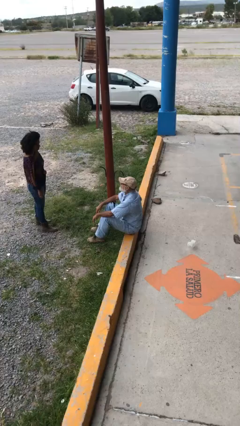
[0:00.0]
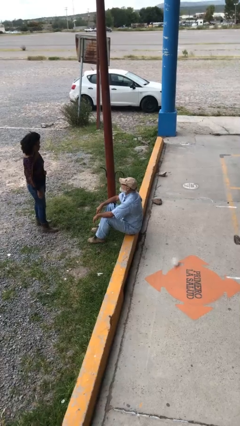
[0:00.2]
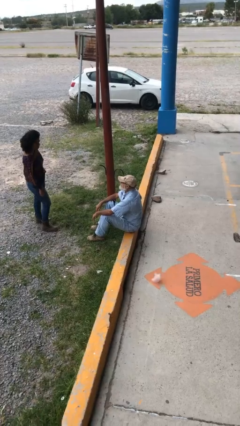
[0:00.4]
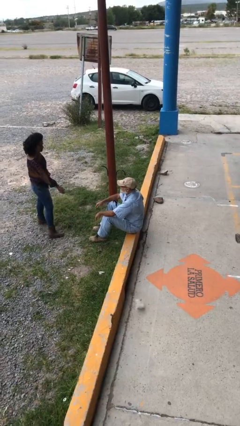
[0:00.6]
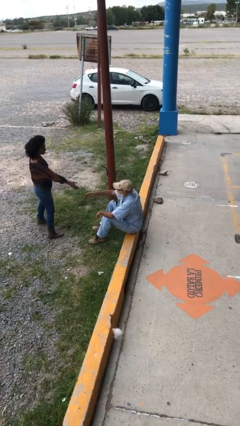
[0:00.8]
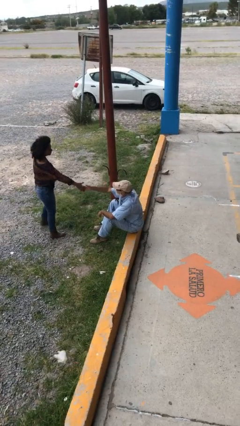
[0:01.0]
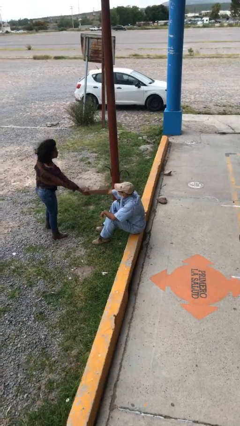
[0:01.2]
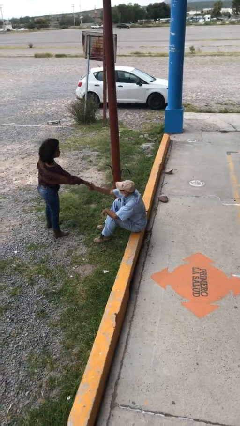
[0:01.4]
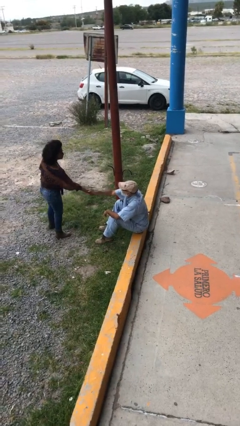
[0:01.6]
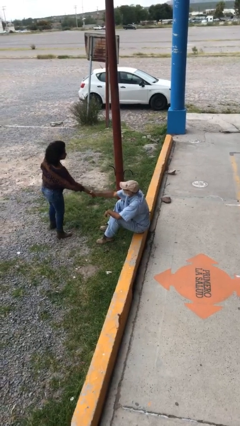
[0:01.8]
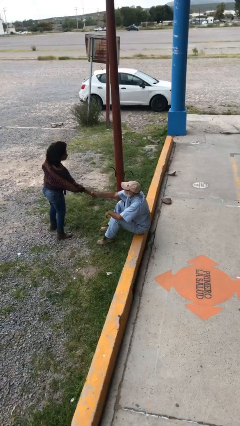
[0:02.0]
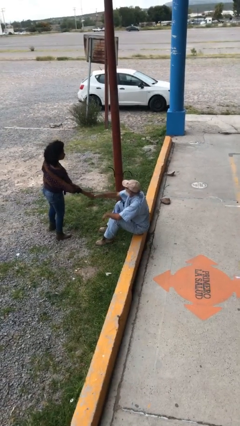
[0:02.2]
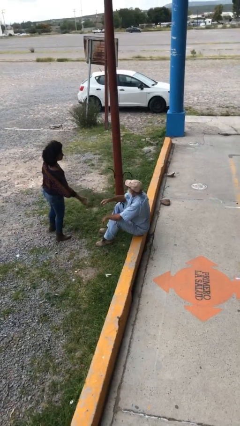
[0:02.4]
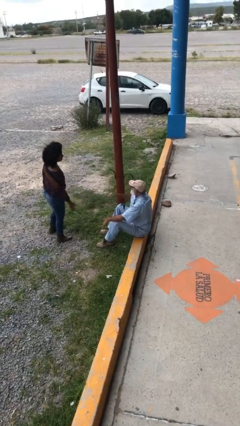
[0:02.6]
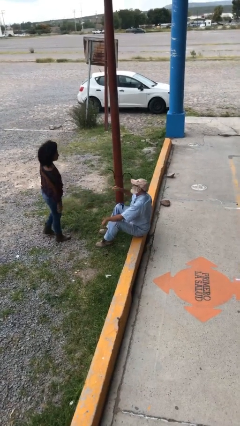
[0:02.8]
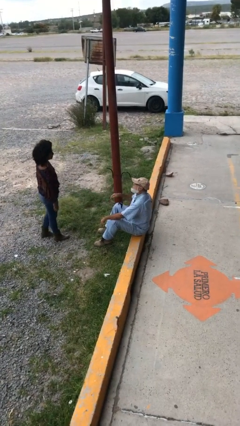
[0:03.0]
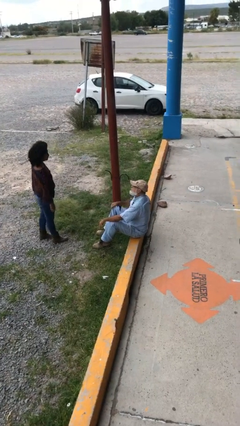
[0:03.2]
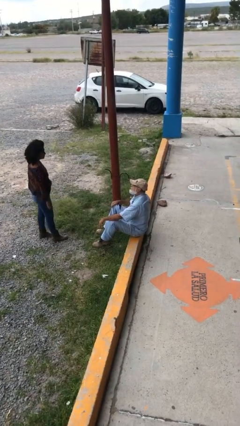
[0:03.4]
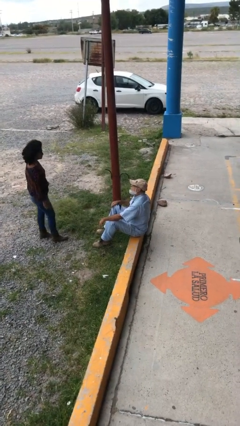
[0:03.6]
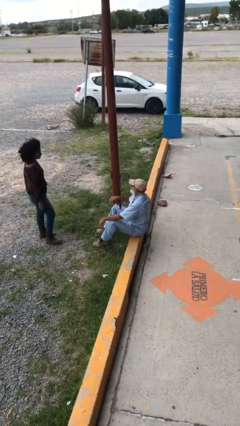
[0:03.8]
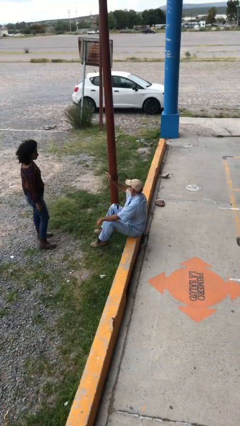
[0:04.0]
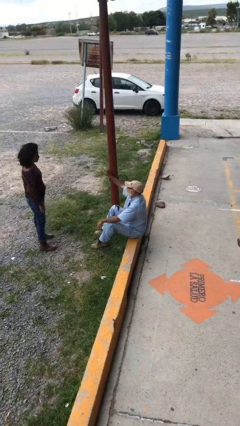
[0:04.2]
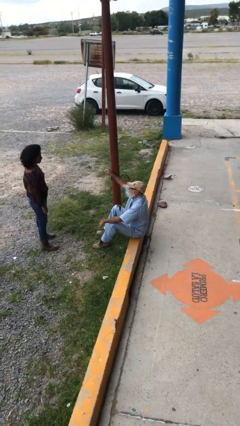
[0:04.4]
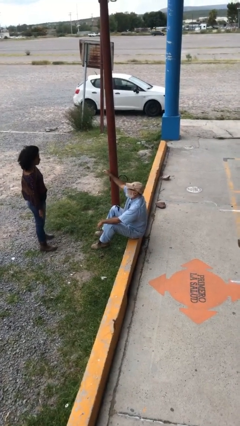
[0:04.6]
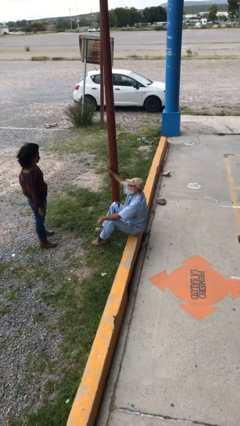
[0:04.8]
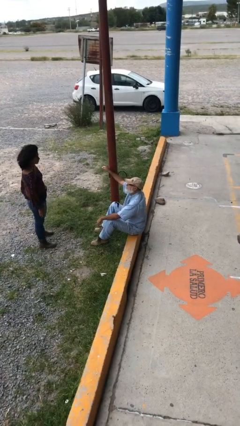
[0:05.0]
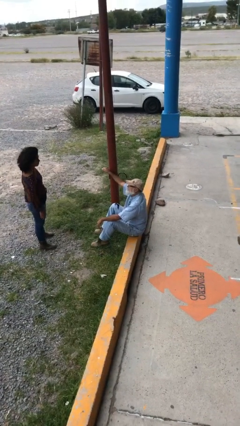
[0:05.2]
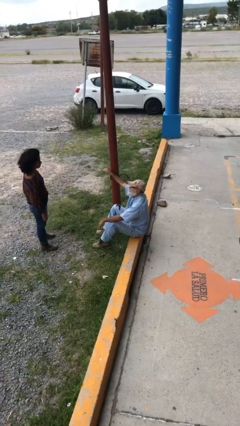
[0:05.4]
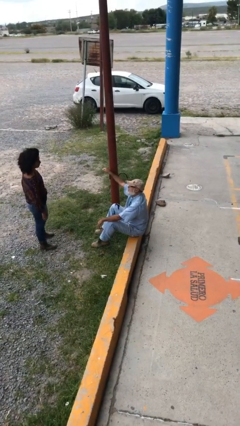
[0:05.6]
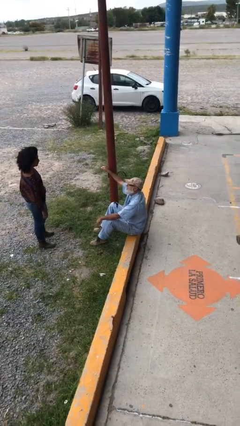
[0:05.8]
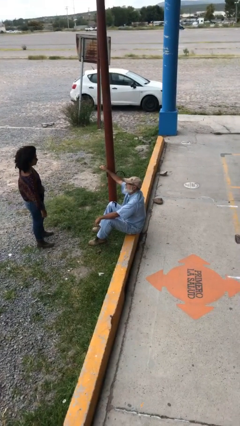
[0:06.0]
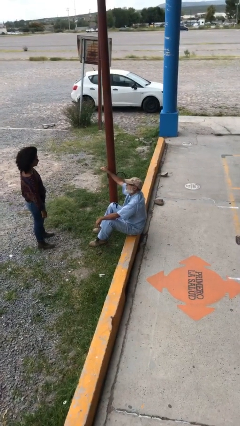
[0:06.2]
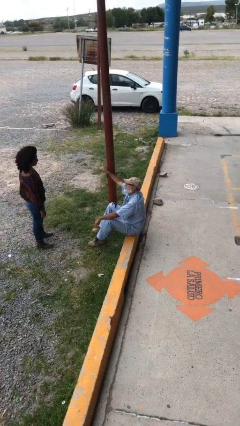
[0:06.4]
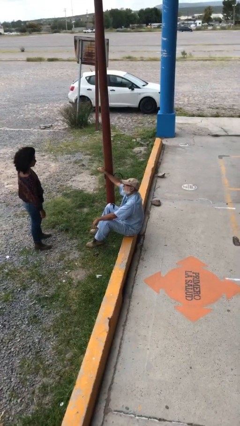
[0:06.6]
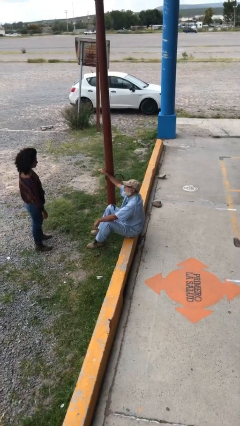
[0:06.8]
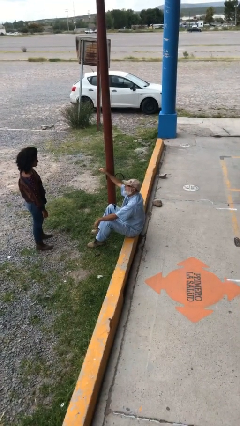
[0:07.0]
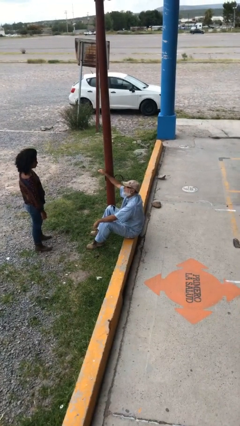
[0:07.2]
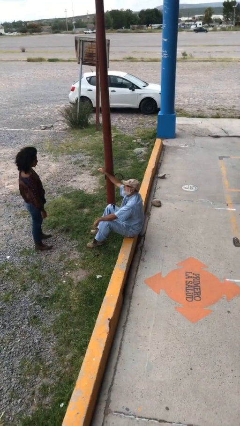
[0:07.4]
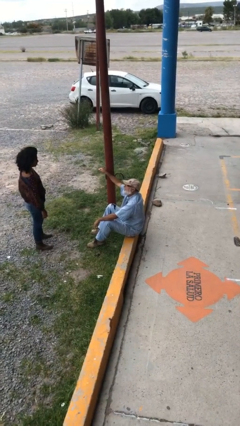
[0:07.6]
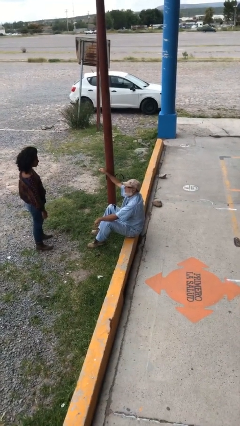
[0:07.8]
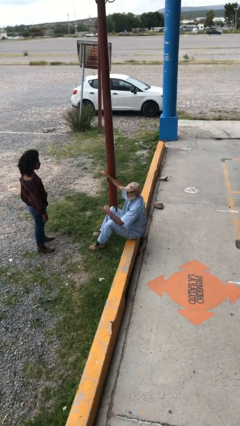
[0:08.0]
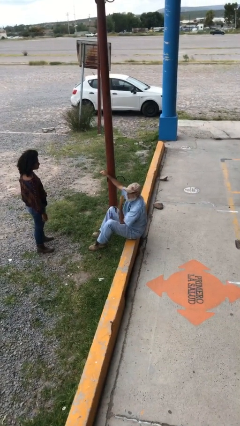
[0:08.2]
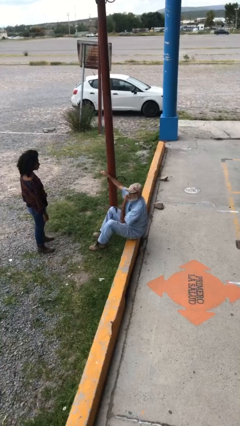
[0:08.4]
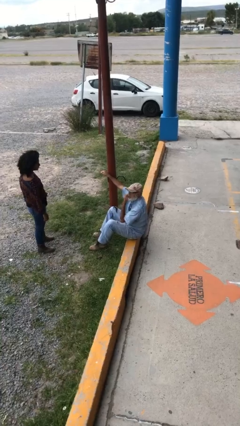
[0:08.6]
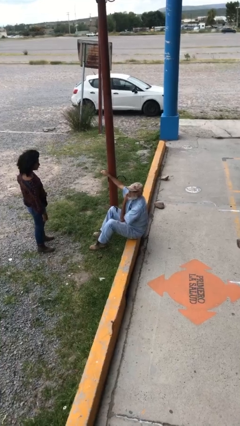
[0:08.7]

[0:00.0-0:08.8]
person shakes hand

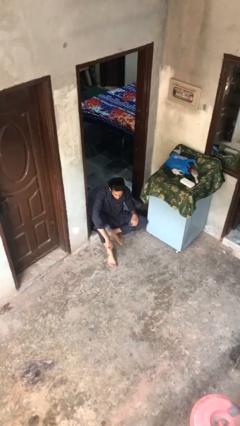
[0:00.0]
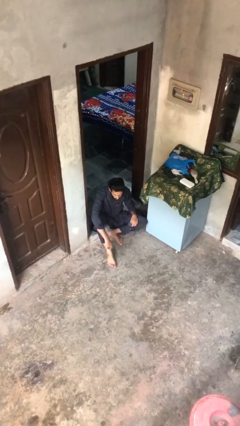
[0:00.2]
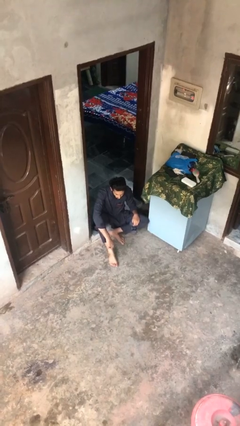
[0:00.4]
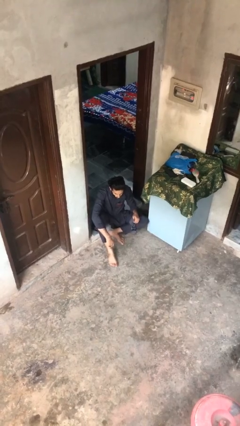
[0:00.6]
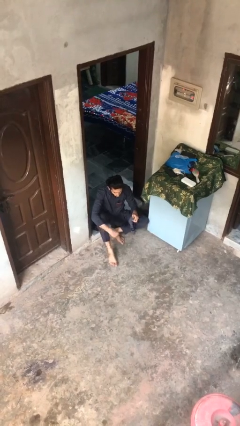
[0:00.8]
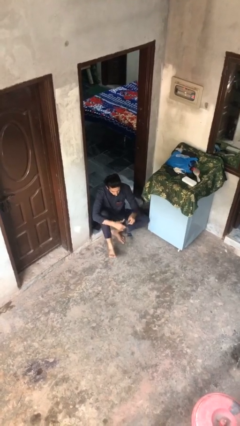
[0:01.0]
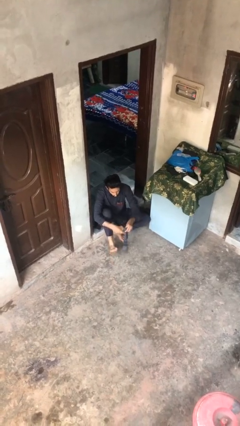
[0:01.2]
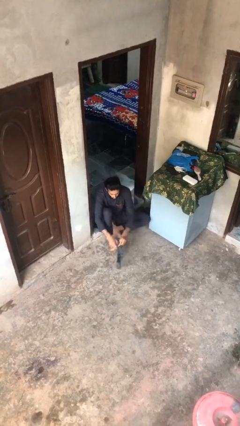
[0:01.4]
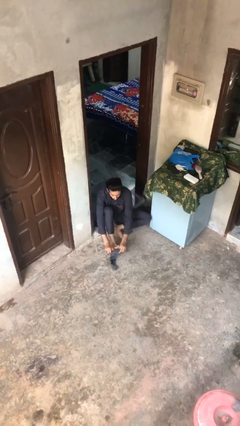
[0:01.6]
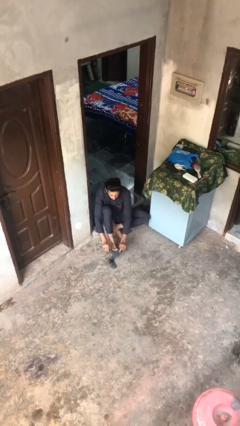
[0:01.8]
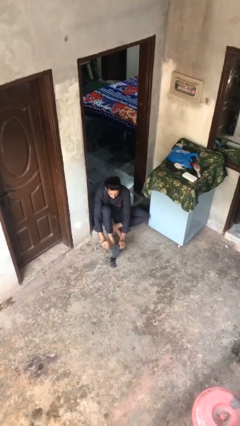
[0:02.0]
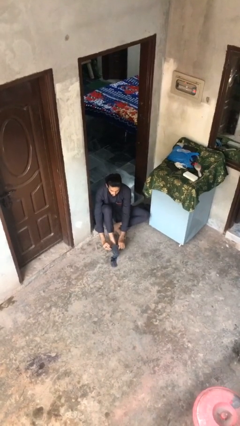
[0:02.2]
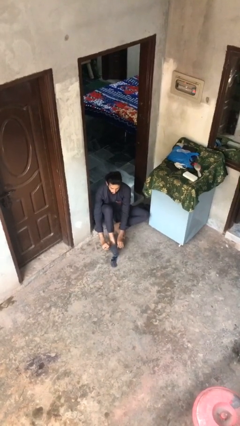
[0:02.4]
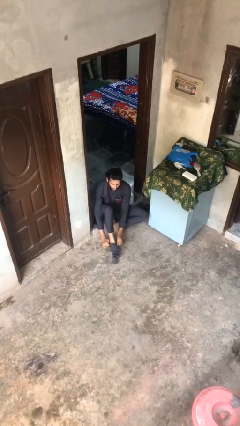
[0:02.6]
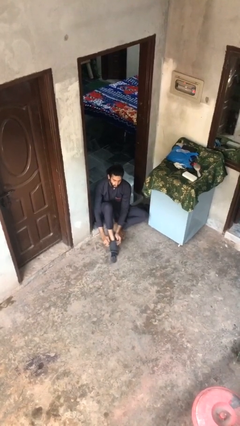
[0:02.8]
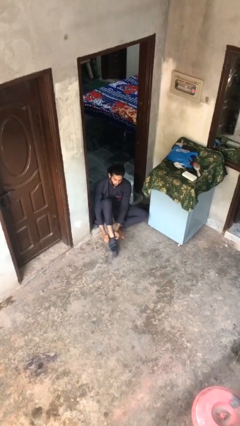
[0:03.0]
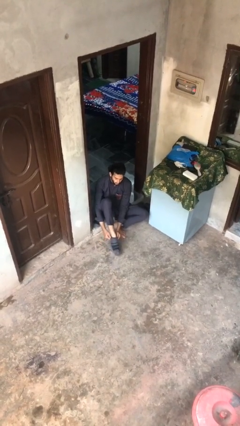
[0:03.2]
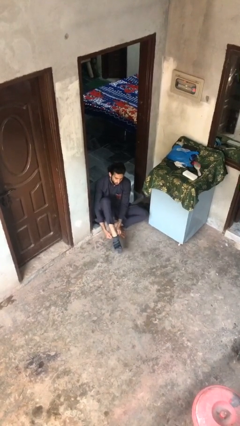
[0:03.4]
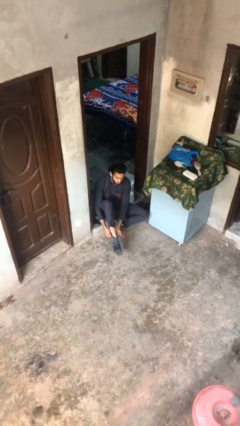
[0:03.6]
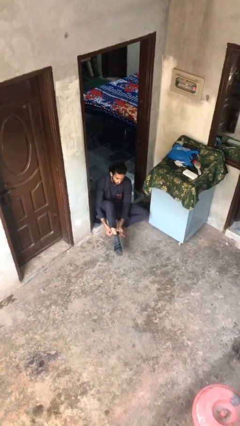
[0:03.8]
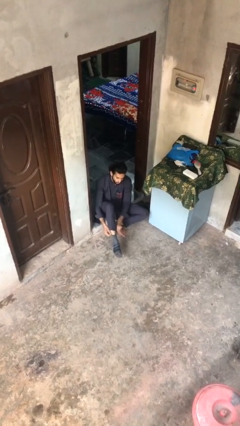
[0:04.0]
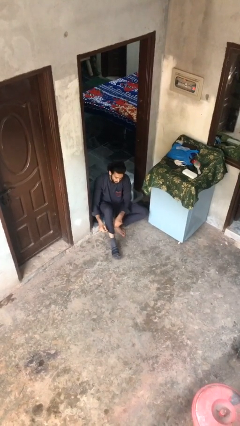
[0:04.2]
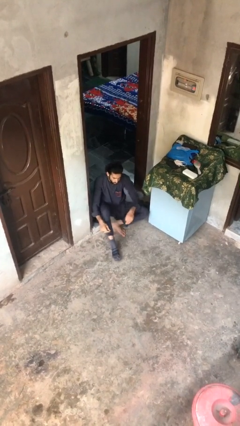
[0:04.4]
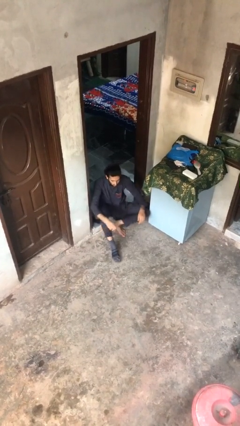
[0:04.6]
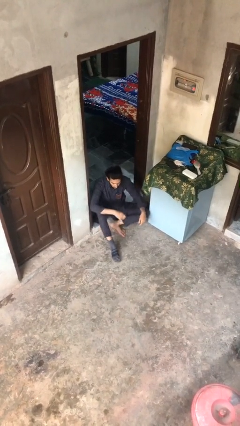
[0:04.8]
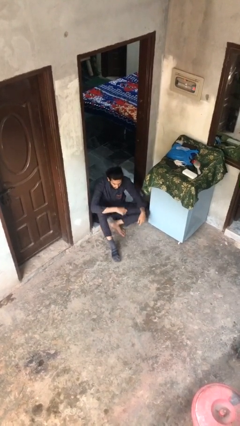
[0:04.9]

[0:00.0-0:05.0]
person puts on socks

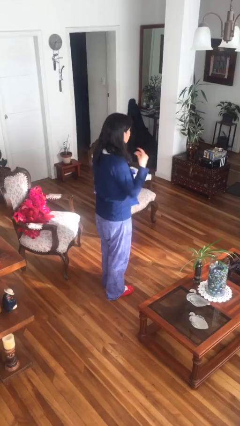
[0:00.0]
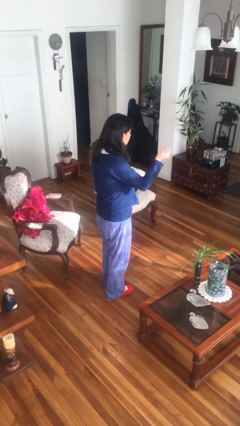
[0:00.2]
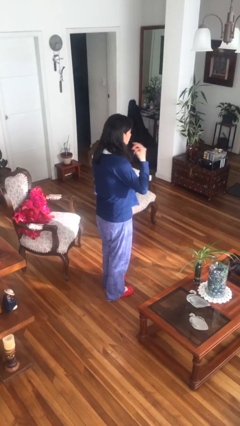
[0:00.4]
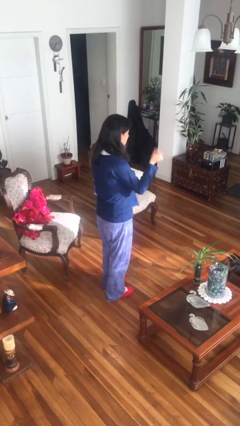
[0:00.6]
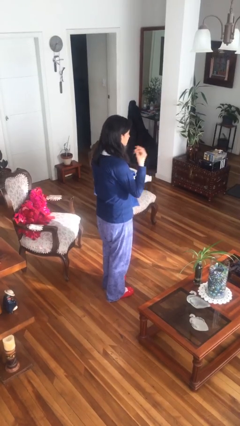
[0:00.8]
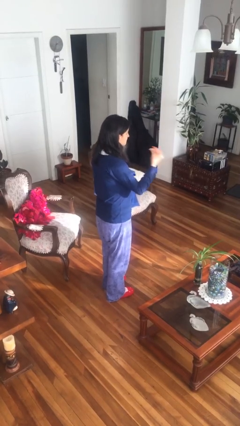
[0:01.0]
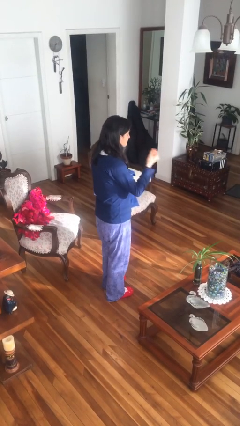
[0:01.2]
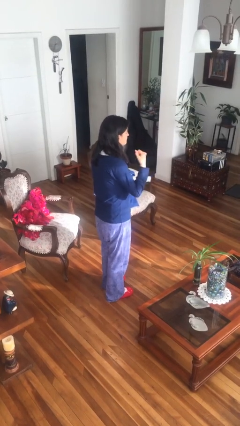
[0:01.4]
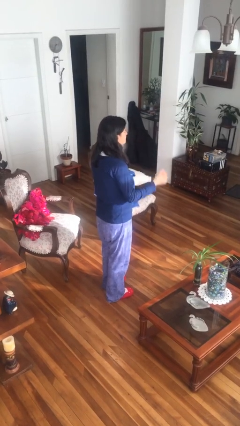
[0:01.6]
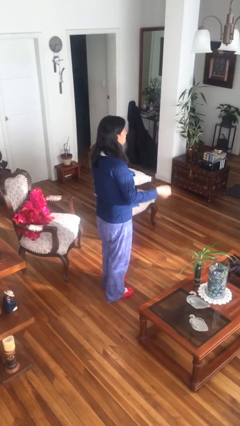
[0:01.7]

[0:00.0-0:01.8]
person snaps fingers

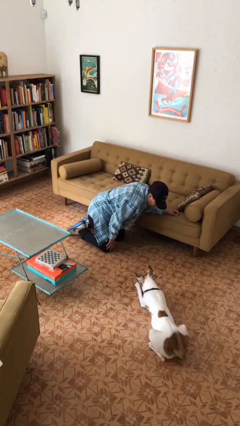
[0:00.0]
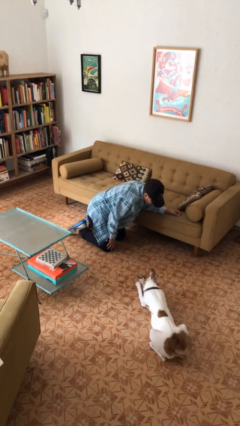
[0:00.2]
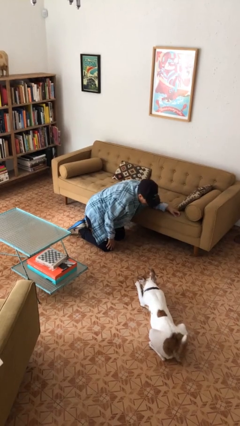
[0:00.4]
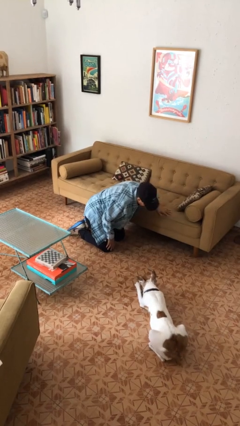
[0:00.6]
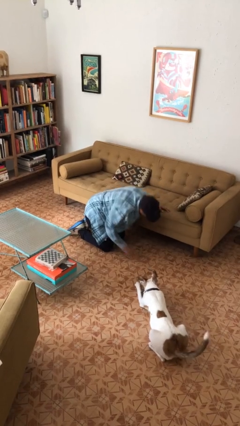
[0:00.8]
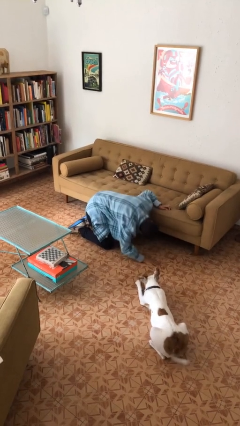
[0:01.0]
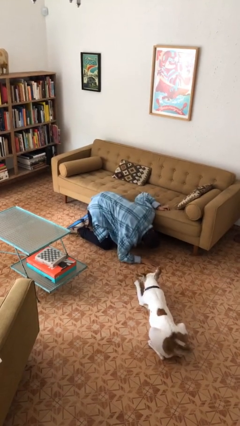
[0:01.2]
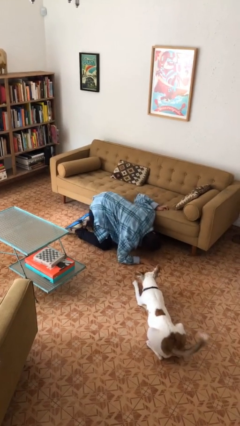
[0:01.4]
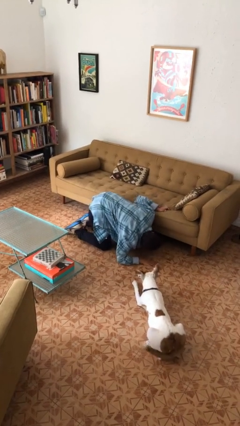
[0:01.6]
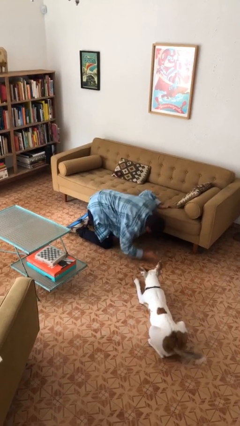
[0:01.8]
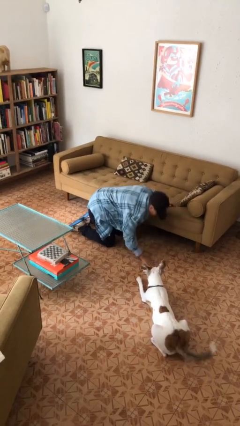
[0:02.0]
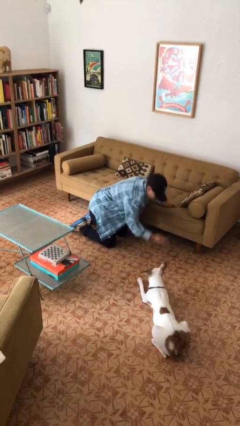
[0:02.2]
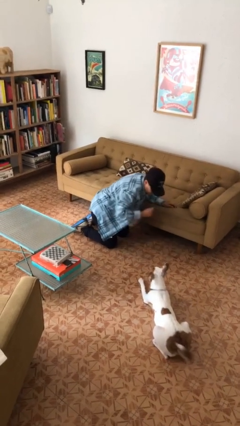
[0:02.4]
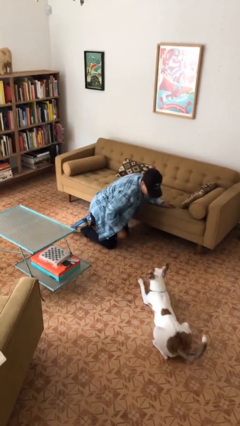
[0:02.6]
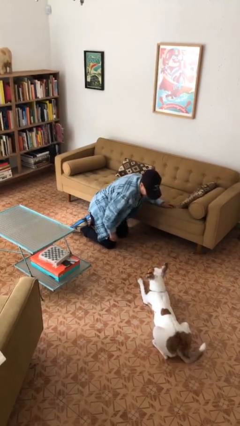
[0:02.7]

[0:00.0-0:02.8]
person searches under couch
